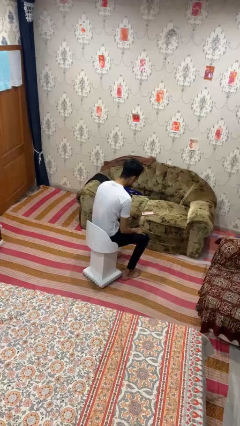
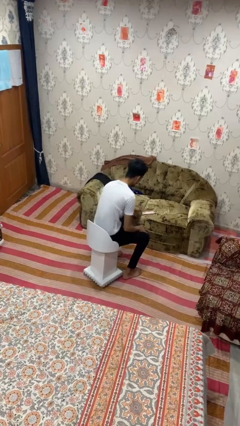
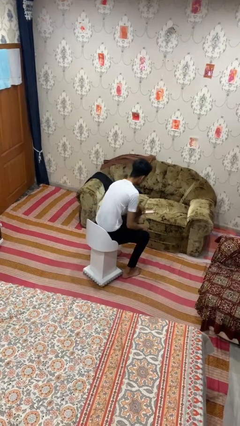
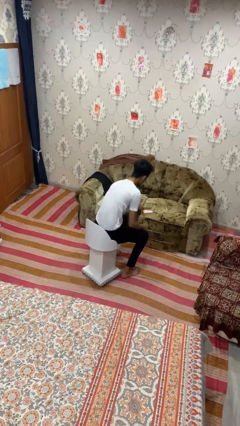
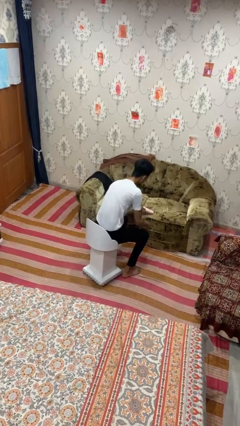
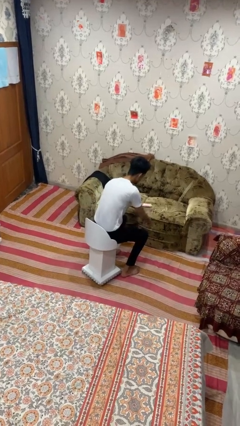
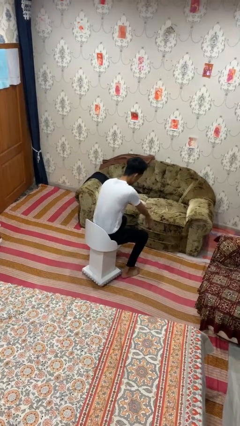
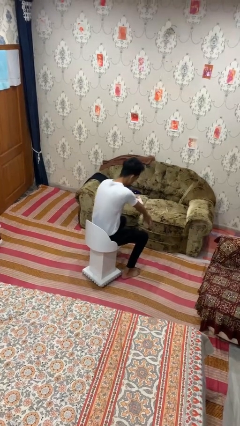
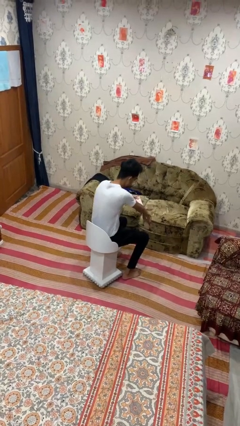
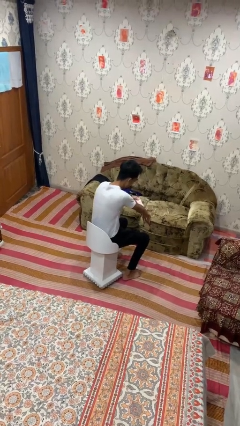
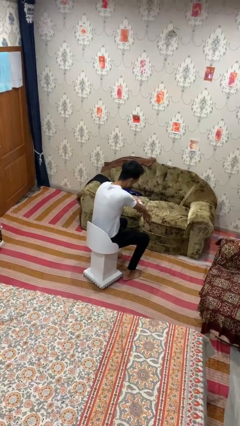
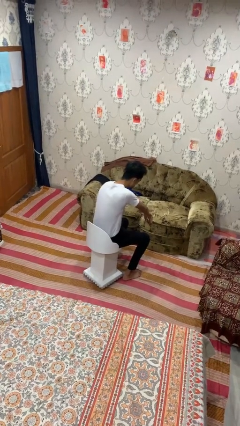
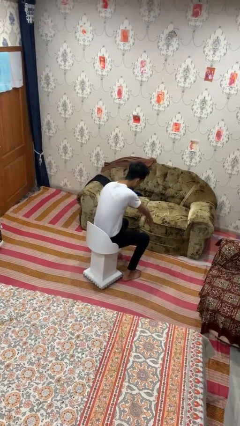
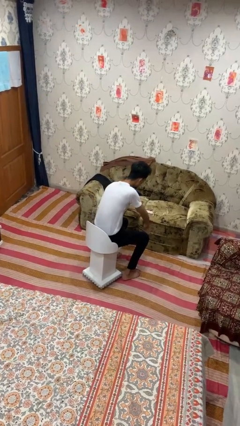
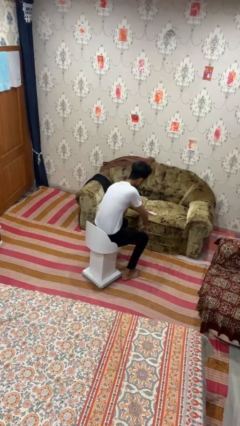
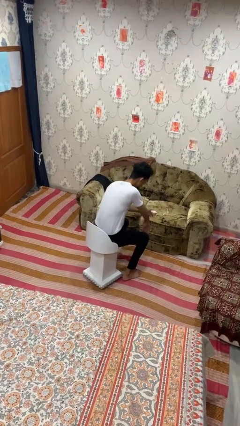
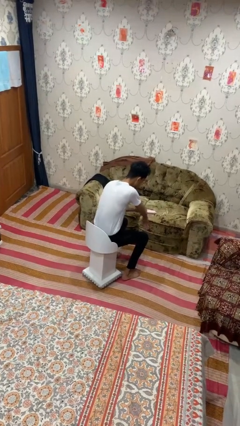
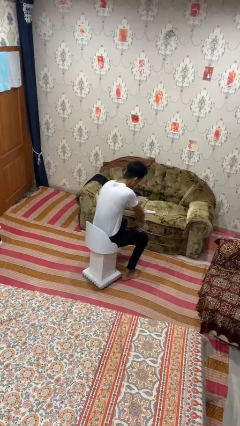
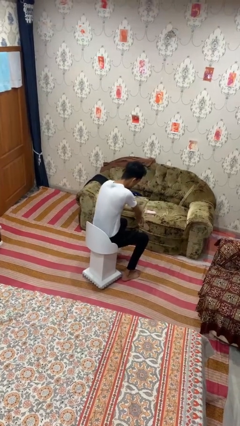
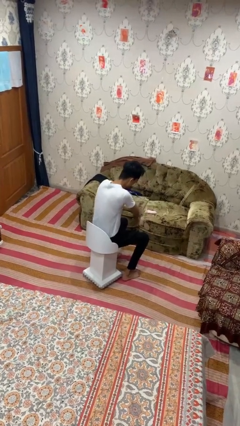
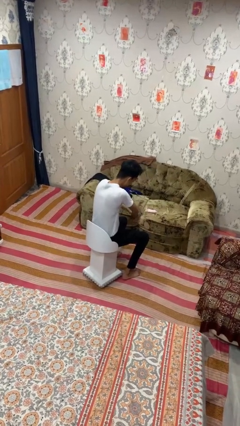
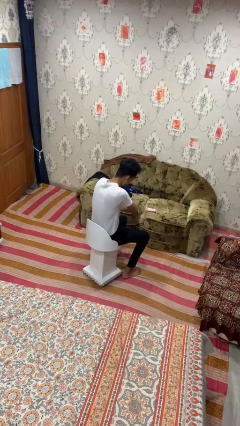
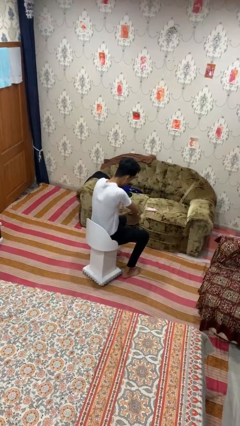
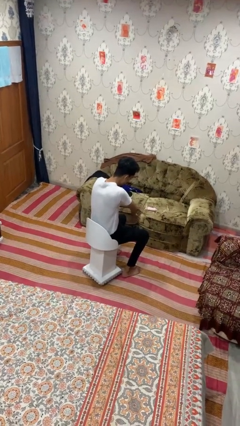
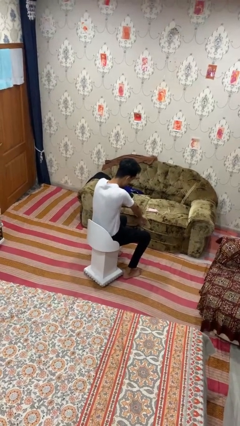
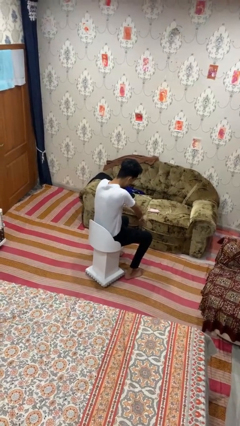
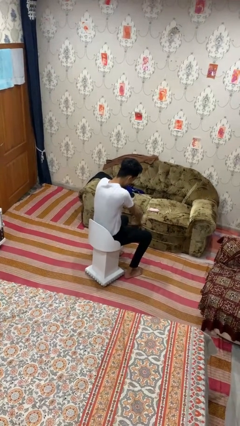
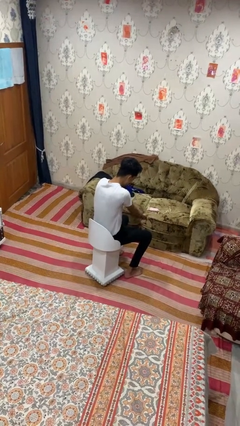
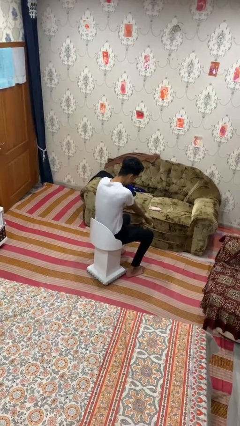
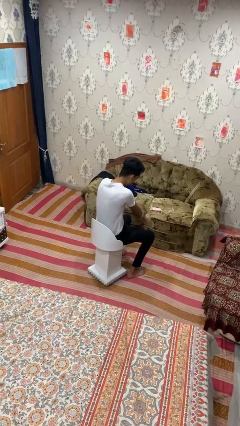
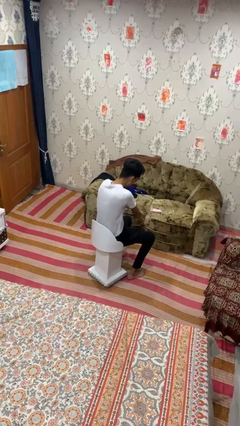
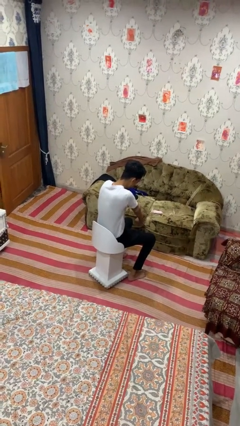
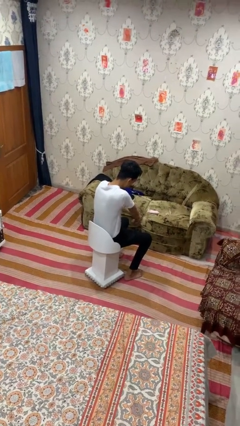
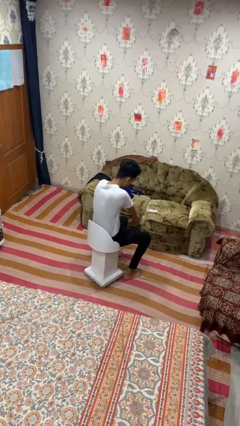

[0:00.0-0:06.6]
person applies sunscreen

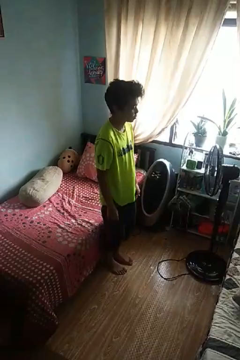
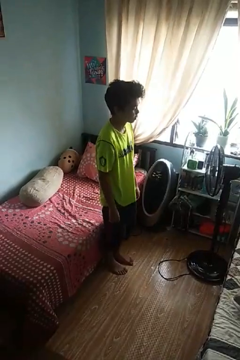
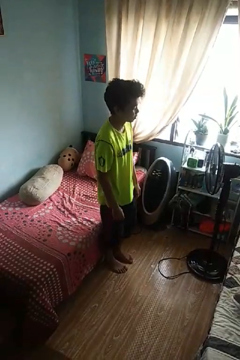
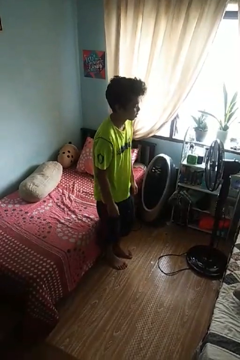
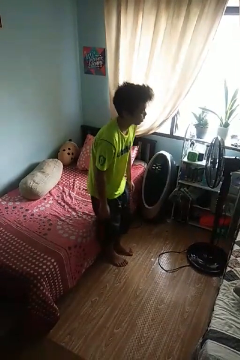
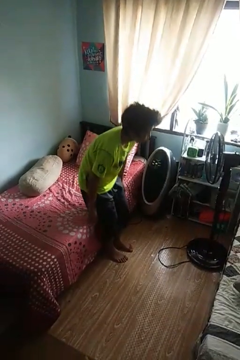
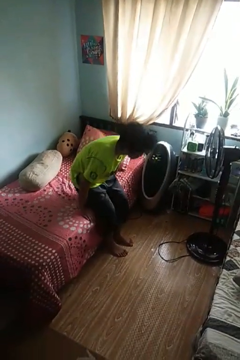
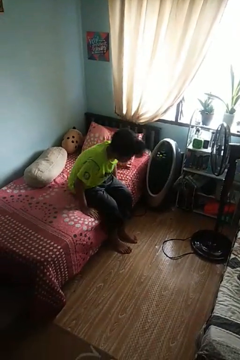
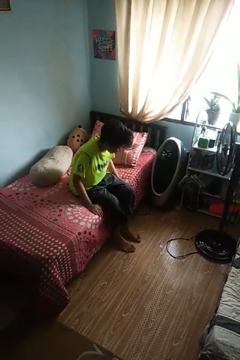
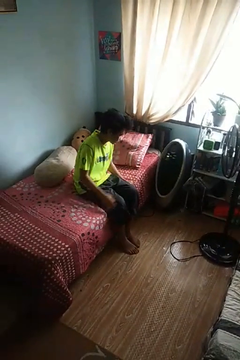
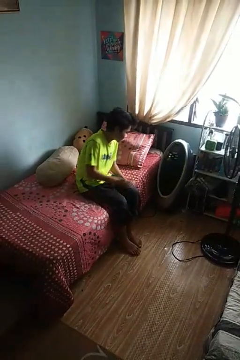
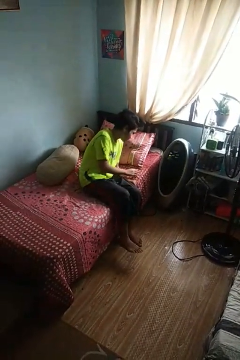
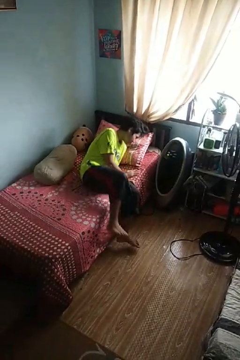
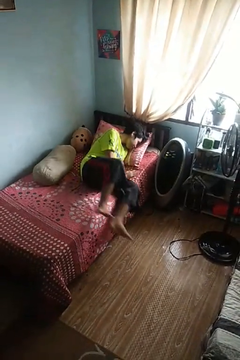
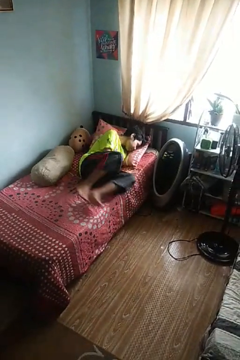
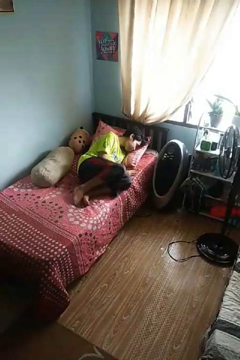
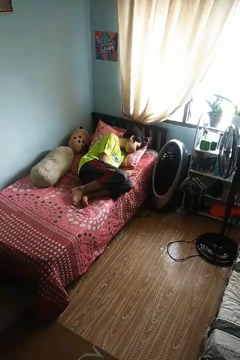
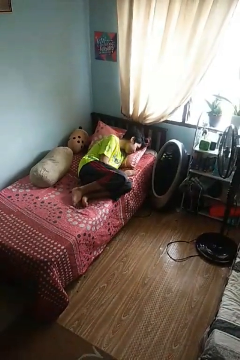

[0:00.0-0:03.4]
person lies down on bed

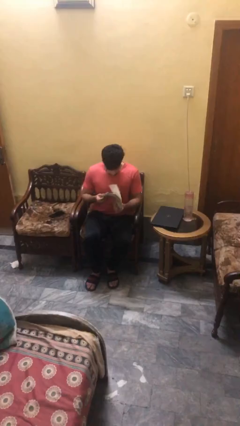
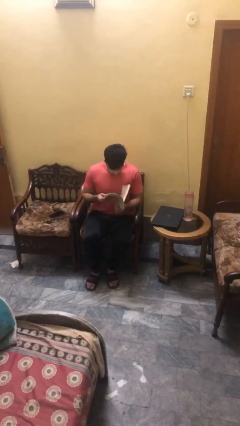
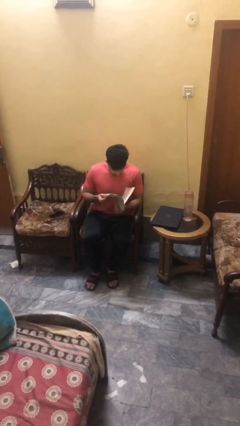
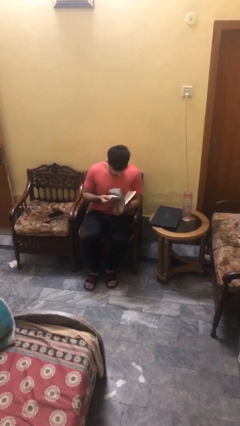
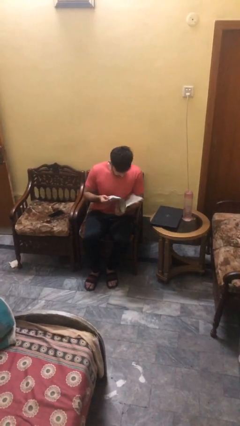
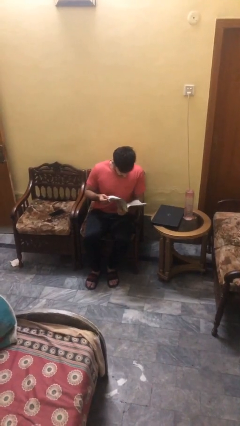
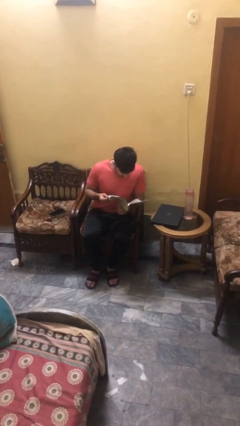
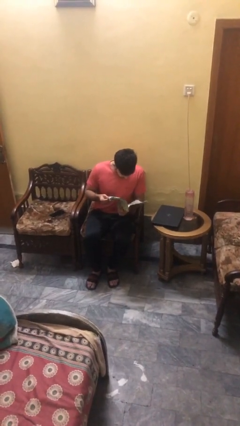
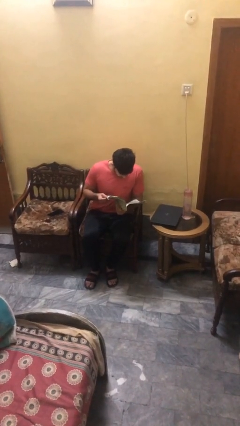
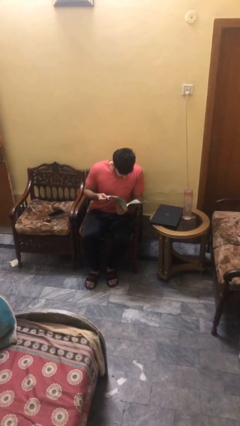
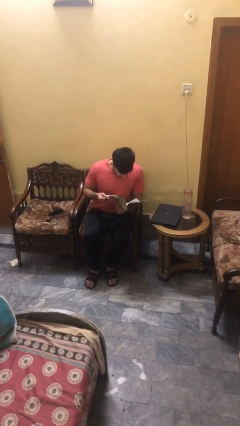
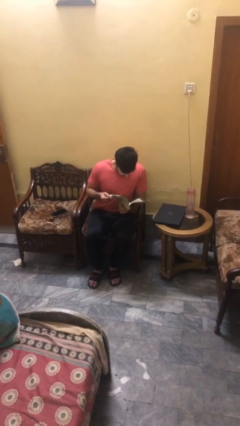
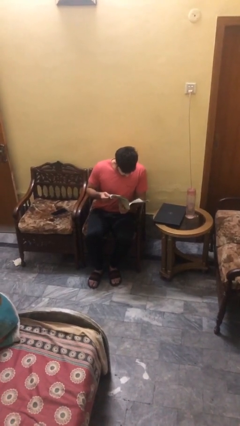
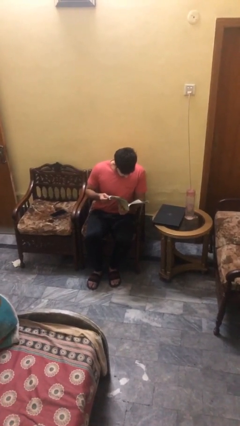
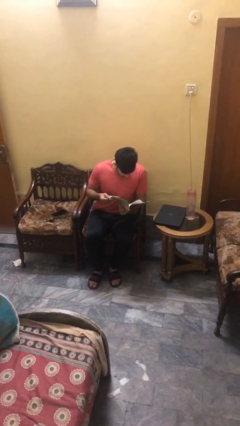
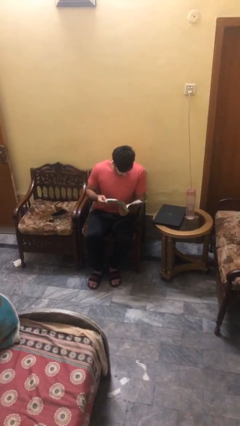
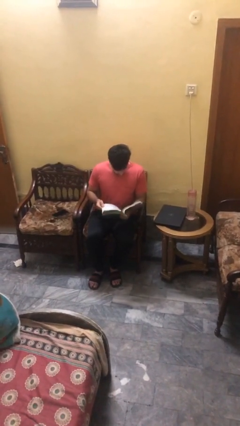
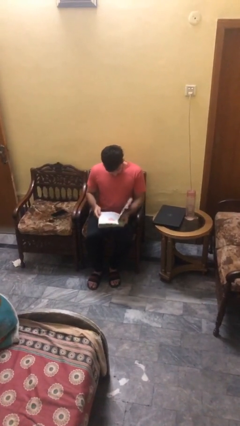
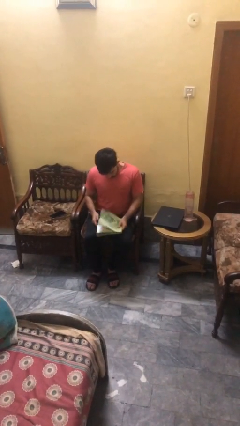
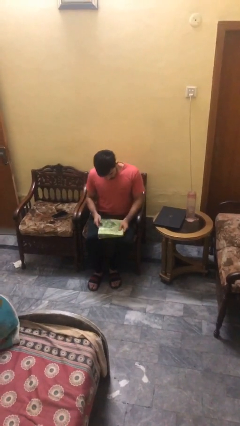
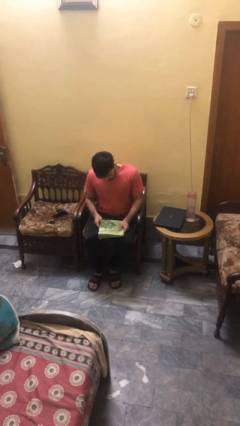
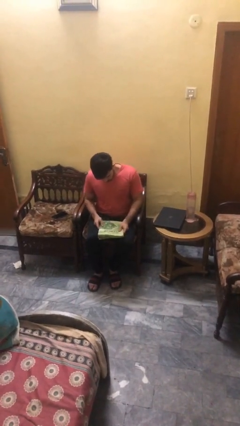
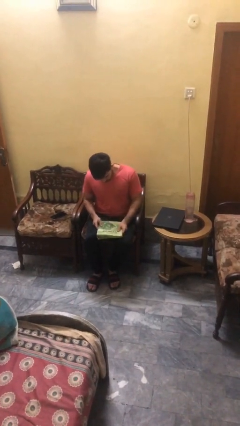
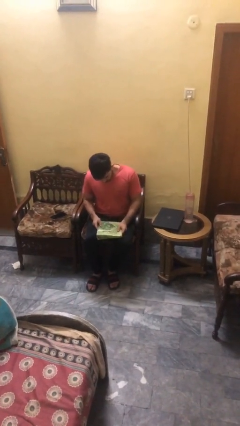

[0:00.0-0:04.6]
person reads document

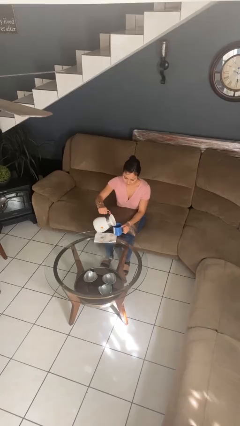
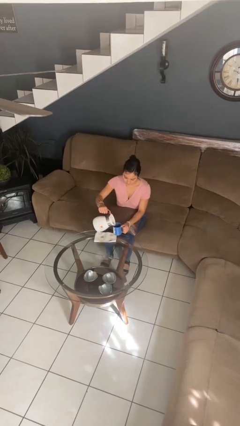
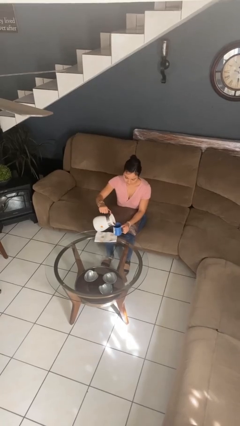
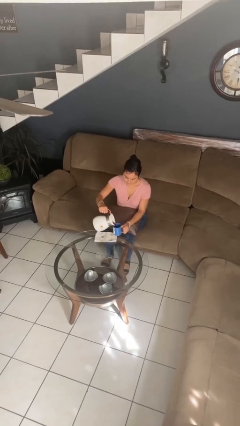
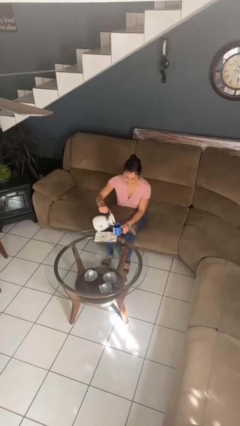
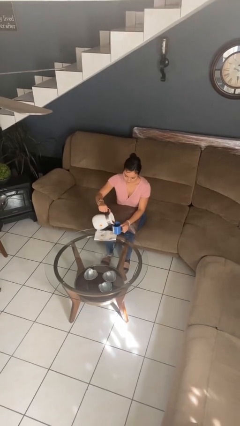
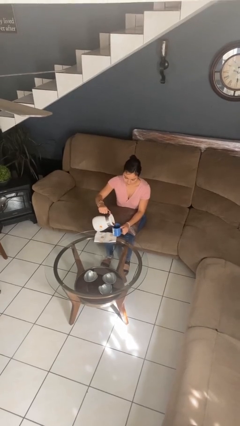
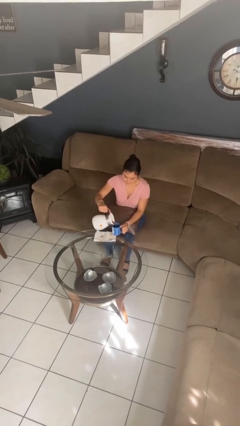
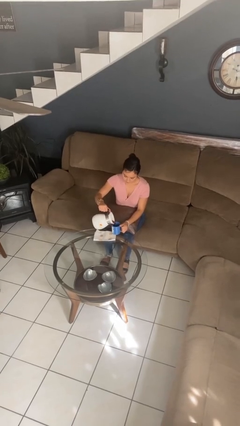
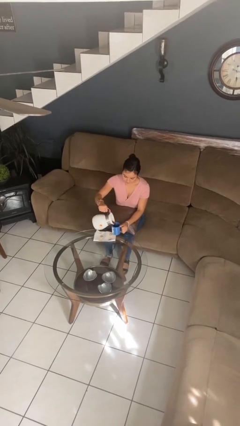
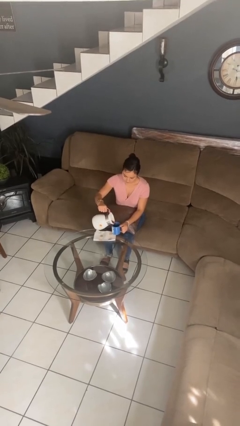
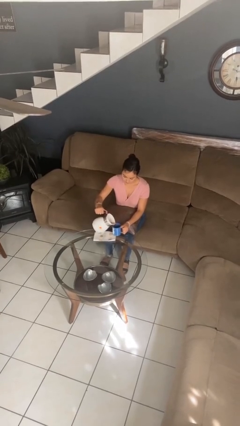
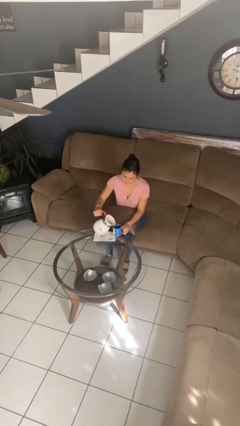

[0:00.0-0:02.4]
person pours coffee into mug

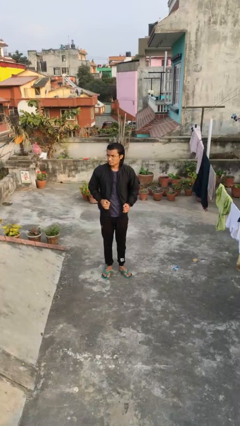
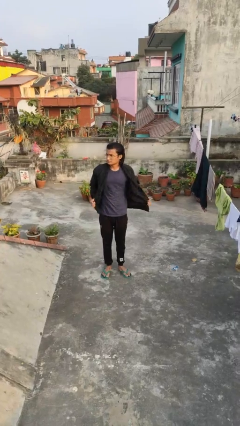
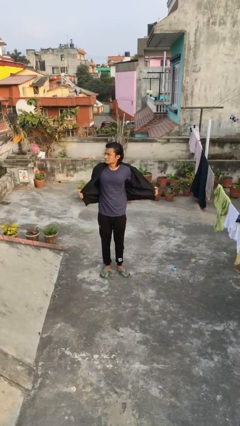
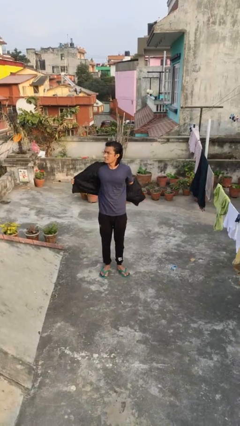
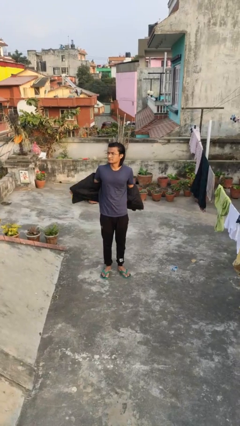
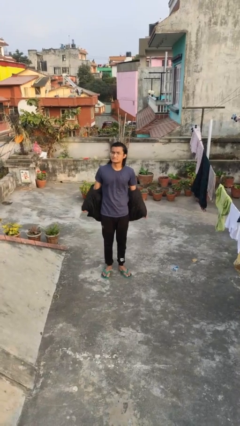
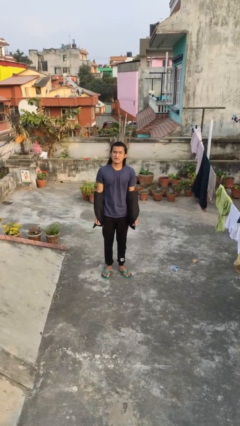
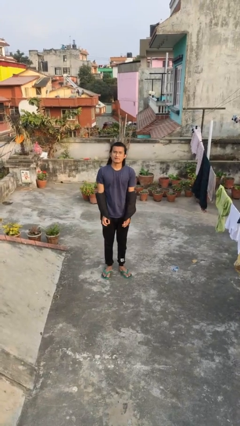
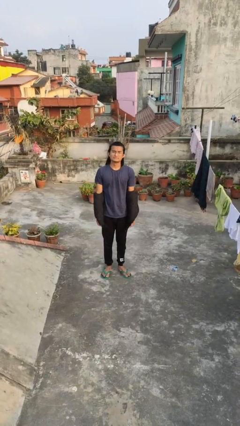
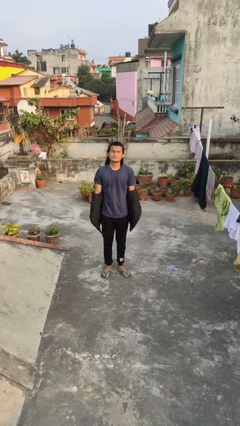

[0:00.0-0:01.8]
person takes off jacket
